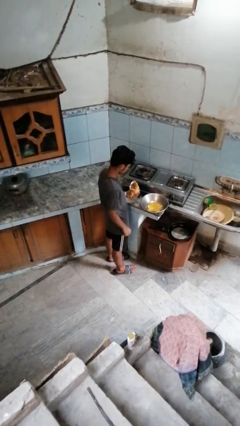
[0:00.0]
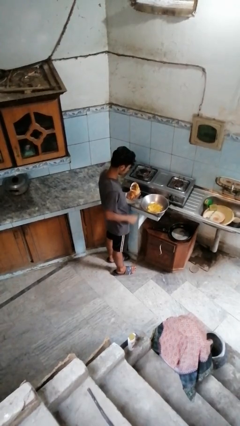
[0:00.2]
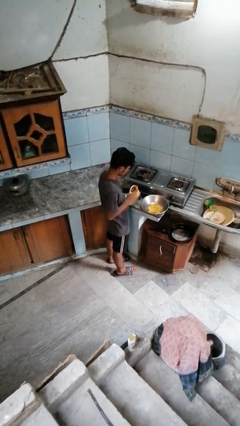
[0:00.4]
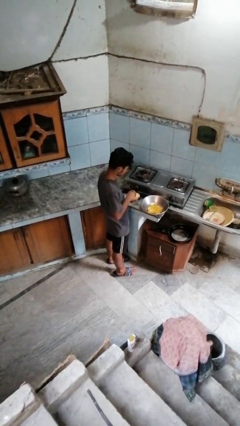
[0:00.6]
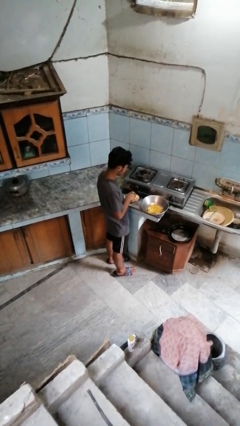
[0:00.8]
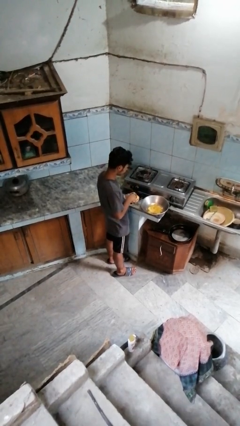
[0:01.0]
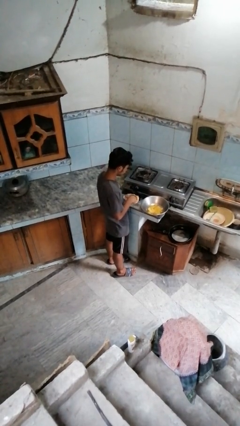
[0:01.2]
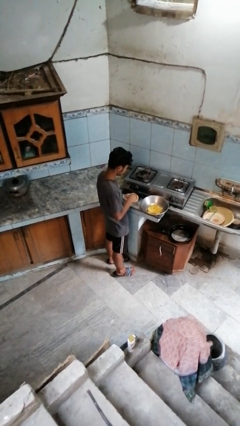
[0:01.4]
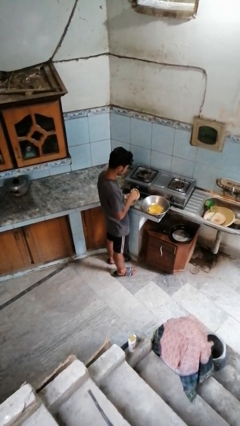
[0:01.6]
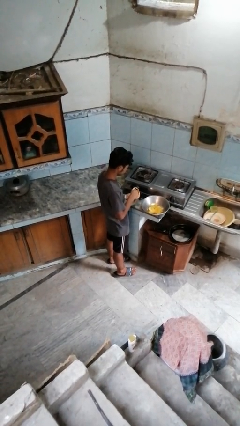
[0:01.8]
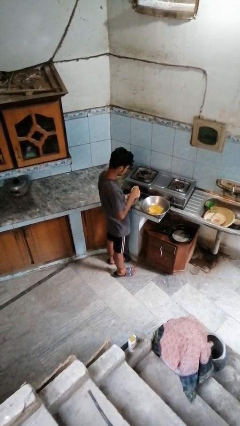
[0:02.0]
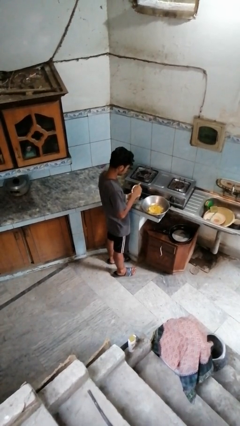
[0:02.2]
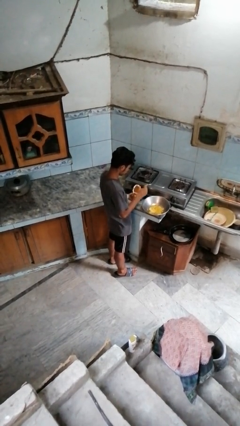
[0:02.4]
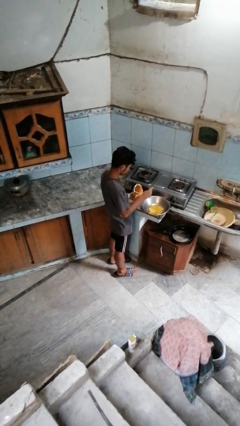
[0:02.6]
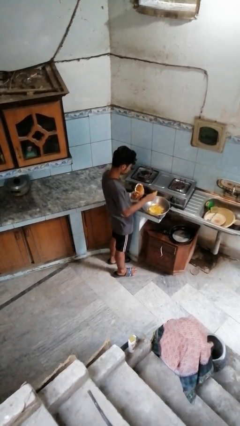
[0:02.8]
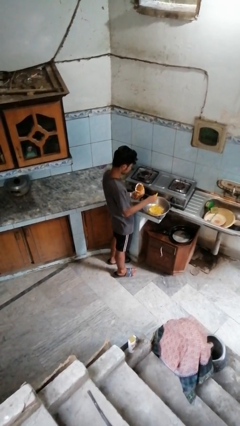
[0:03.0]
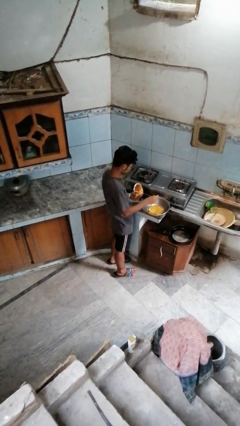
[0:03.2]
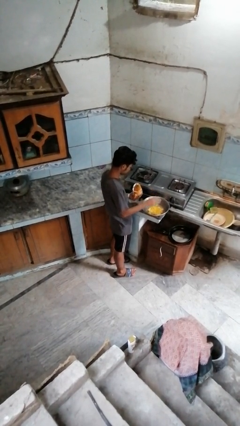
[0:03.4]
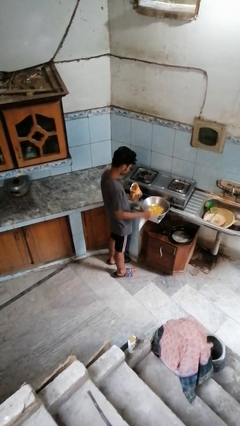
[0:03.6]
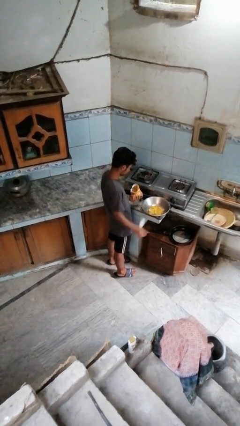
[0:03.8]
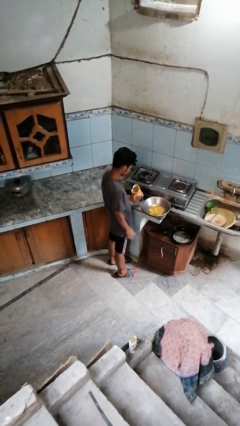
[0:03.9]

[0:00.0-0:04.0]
person pours into bowl

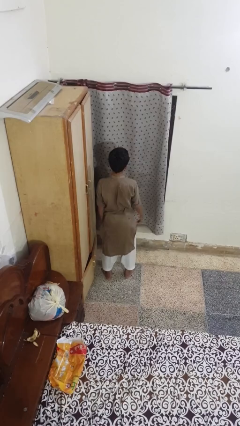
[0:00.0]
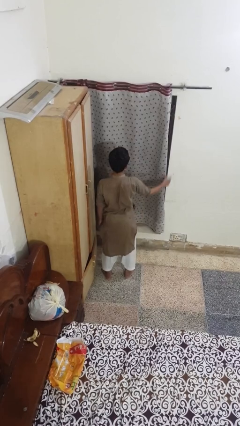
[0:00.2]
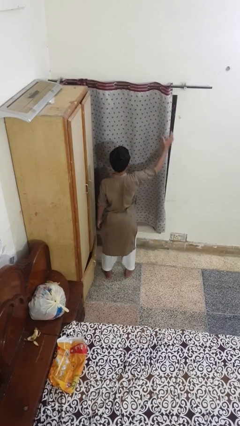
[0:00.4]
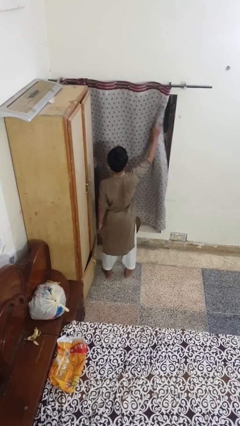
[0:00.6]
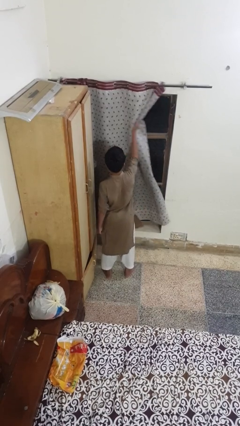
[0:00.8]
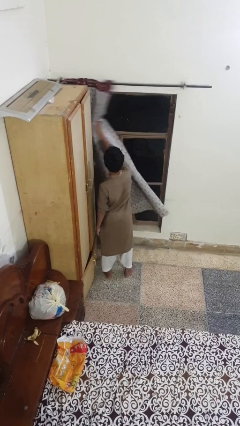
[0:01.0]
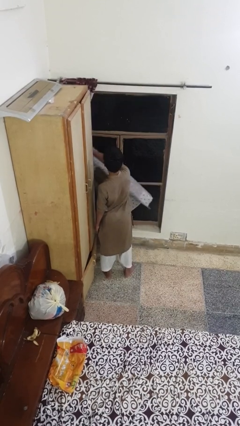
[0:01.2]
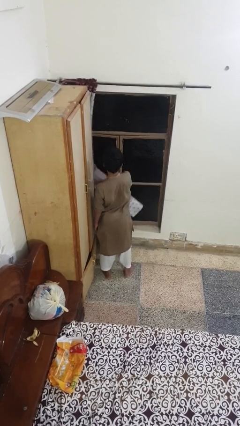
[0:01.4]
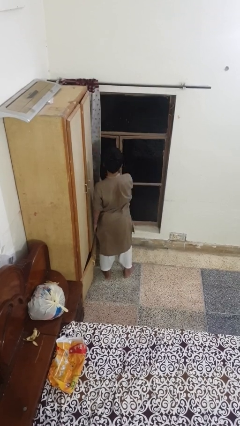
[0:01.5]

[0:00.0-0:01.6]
person opens curtains

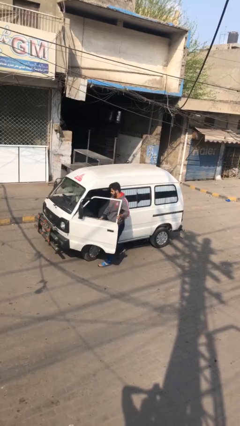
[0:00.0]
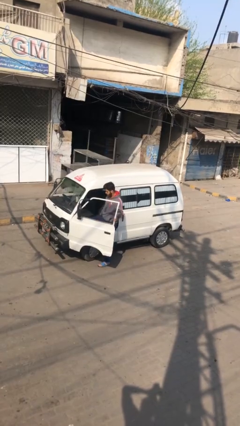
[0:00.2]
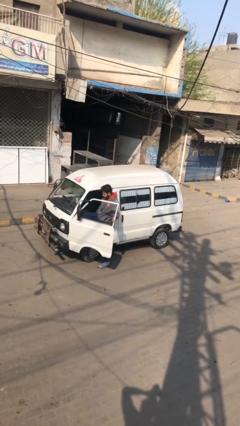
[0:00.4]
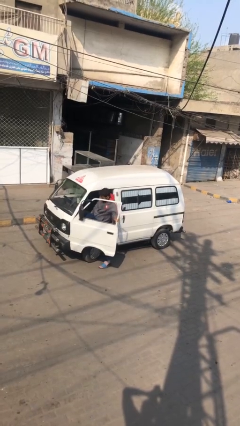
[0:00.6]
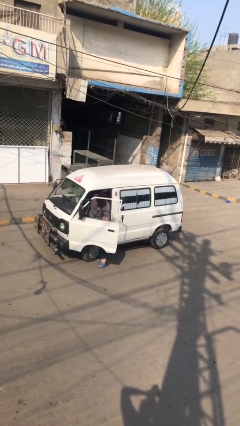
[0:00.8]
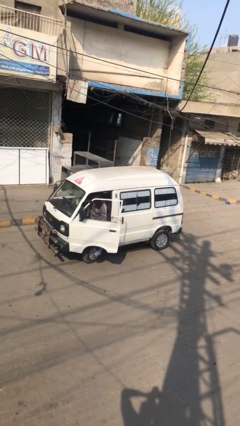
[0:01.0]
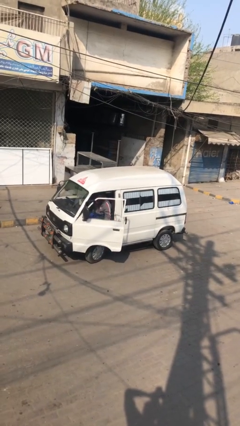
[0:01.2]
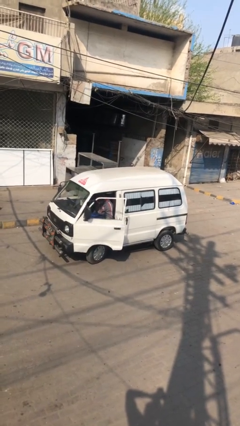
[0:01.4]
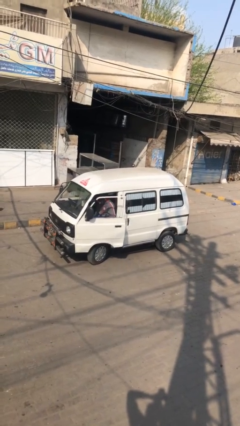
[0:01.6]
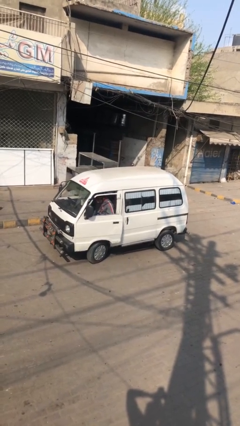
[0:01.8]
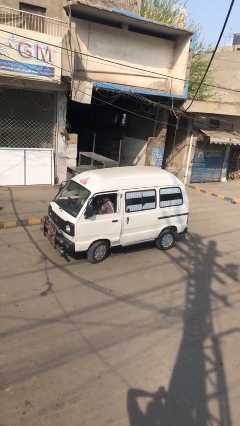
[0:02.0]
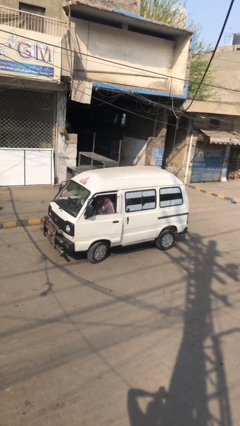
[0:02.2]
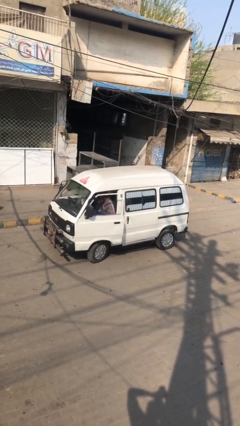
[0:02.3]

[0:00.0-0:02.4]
car picks up person

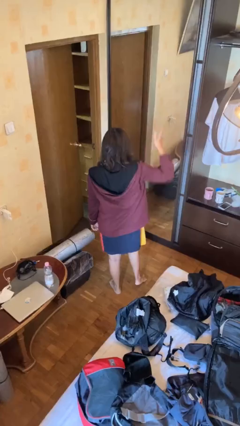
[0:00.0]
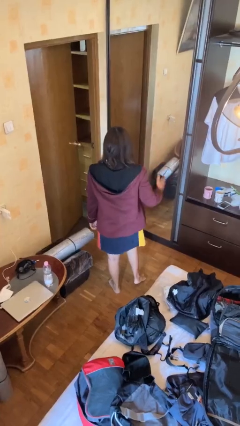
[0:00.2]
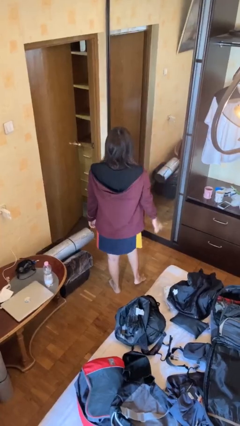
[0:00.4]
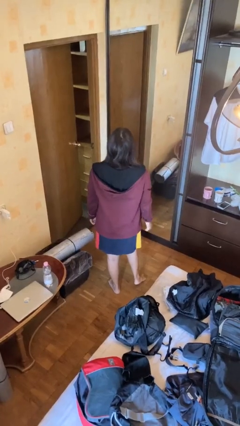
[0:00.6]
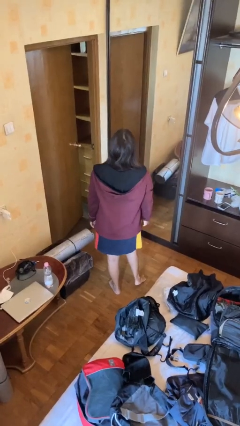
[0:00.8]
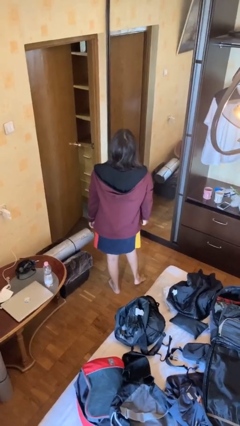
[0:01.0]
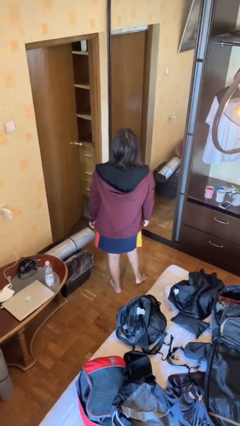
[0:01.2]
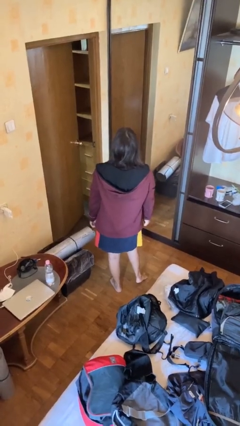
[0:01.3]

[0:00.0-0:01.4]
person gestures swipe down

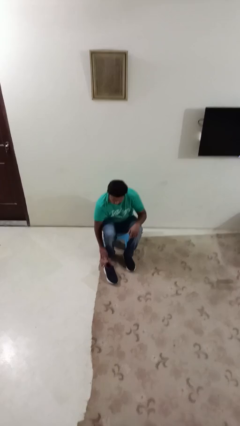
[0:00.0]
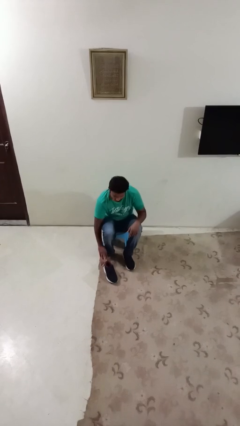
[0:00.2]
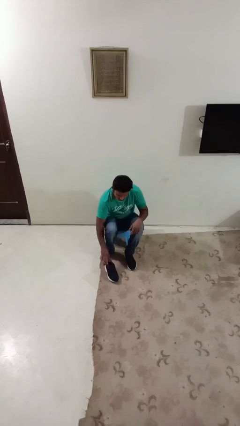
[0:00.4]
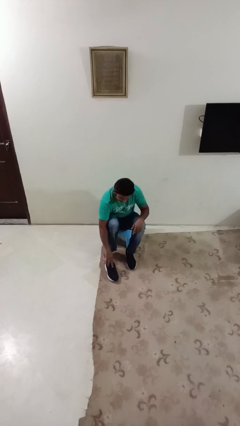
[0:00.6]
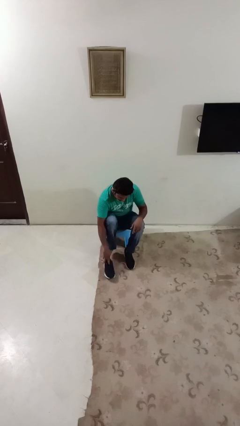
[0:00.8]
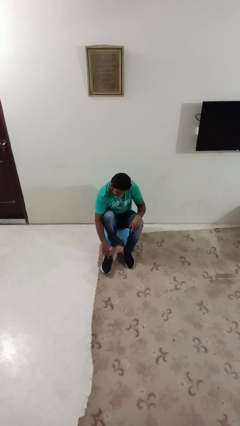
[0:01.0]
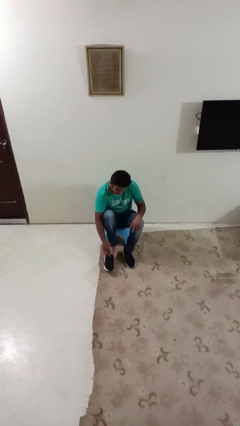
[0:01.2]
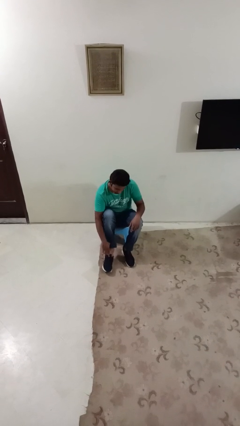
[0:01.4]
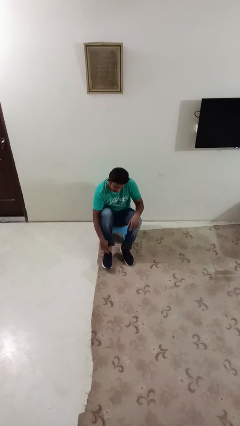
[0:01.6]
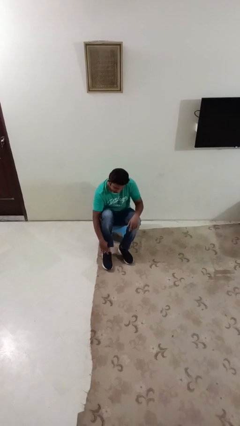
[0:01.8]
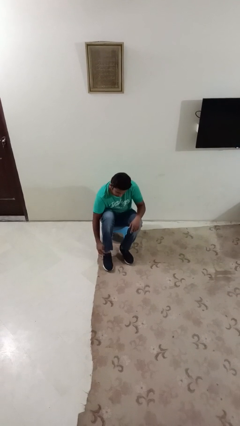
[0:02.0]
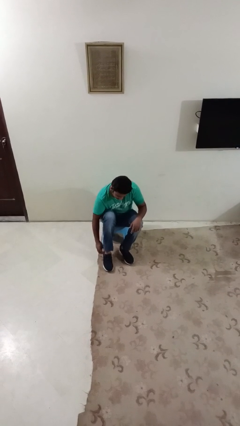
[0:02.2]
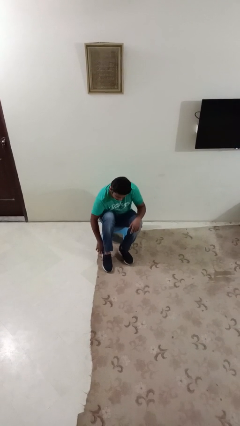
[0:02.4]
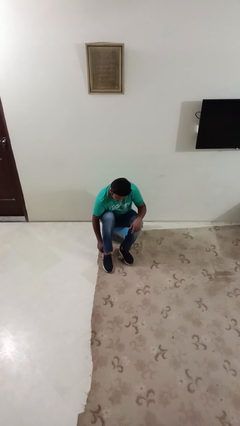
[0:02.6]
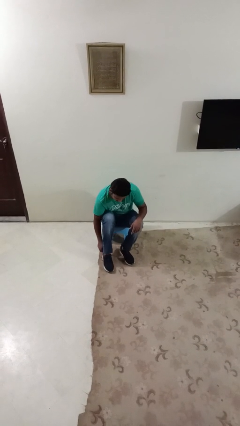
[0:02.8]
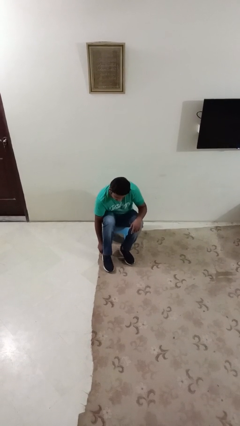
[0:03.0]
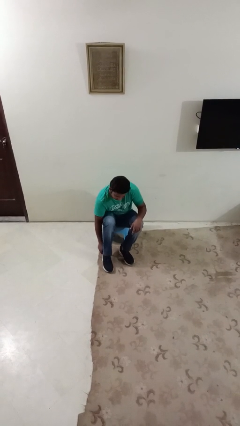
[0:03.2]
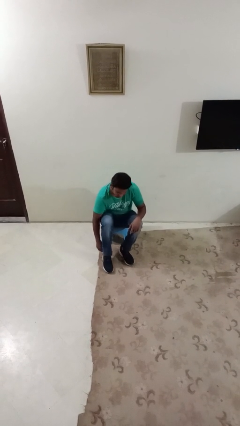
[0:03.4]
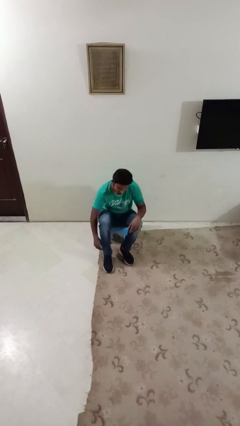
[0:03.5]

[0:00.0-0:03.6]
person puts on shoes

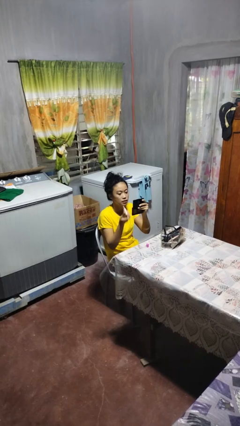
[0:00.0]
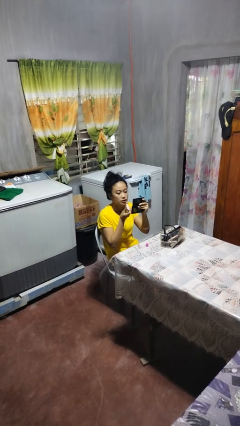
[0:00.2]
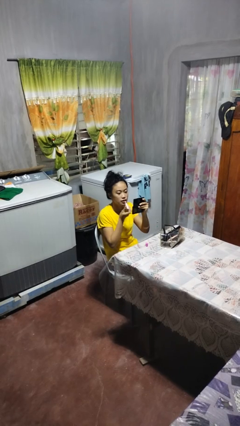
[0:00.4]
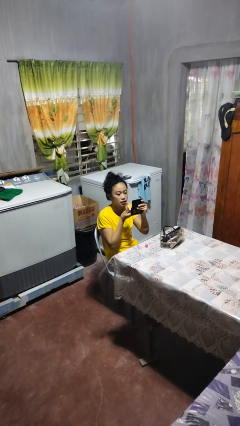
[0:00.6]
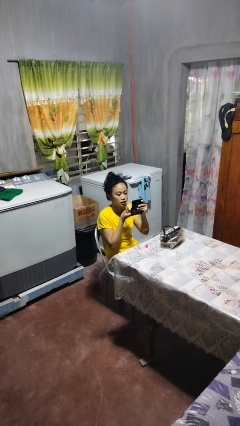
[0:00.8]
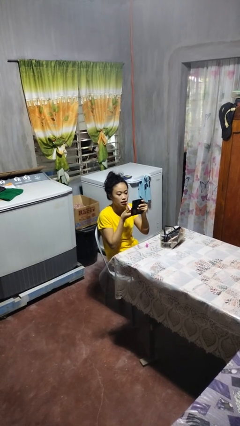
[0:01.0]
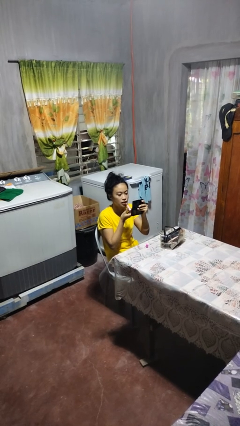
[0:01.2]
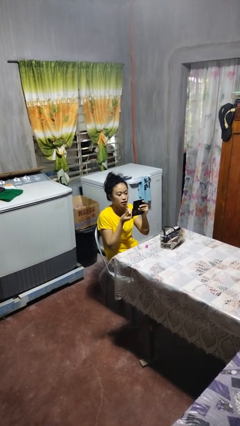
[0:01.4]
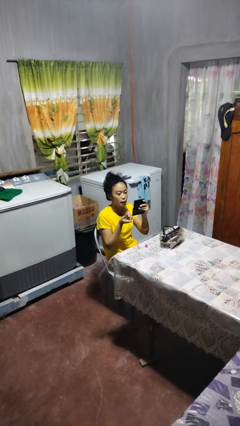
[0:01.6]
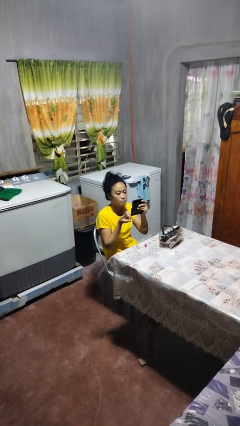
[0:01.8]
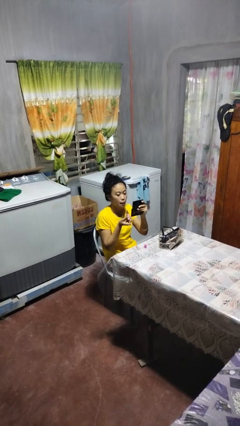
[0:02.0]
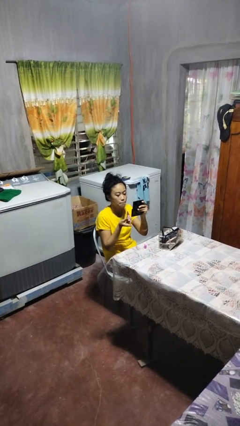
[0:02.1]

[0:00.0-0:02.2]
person applies lip makeup

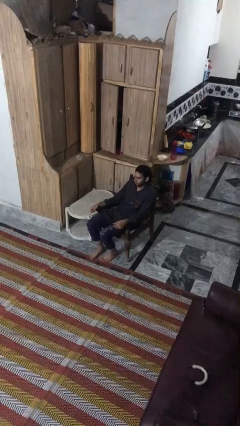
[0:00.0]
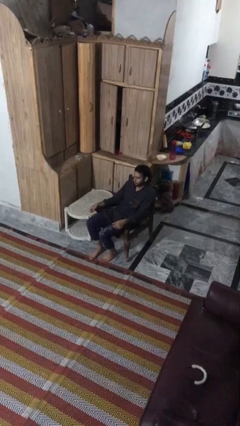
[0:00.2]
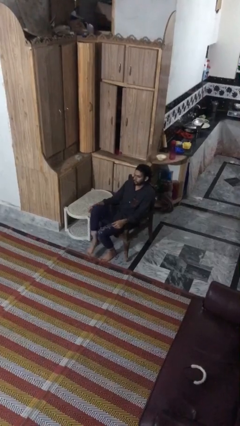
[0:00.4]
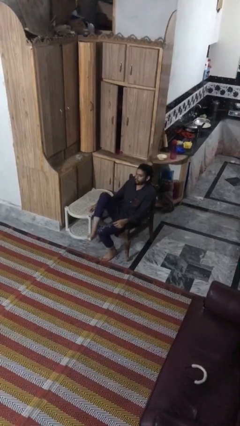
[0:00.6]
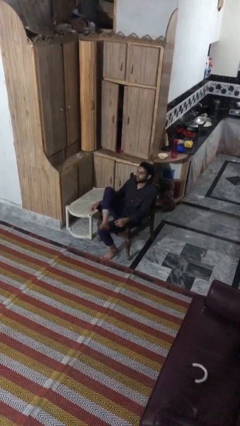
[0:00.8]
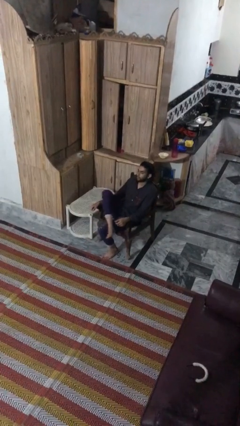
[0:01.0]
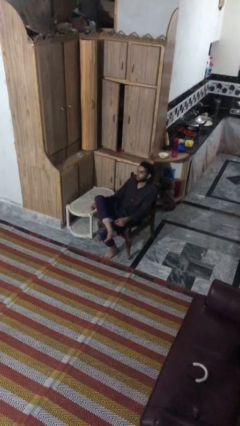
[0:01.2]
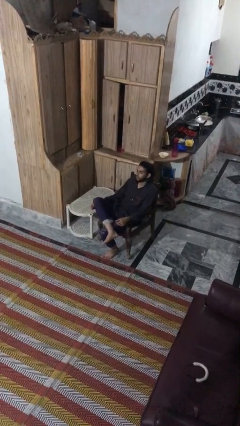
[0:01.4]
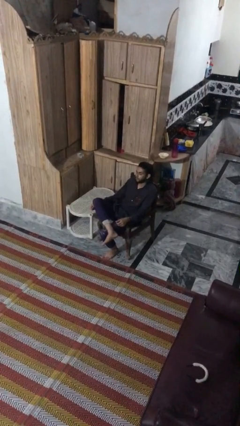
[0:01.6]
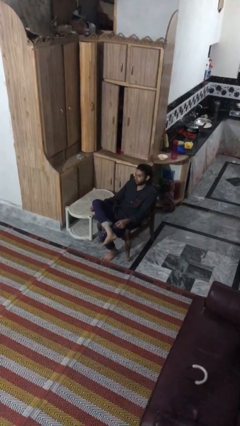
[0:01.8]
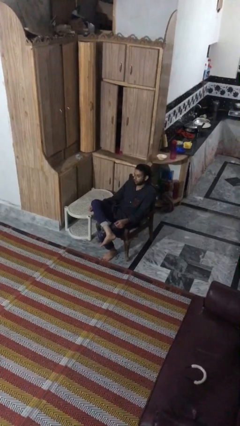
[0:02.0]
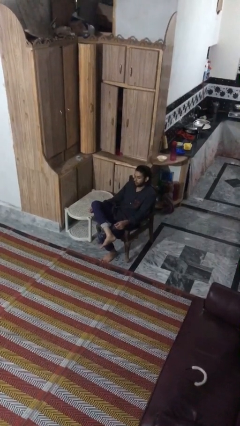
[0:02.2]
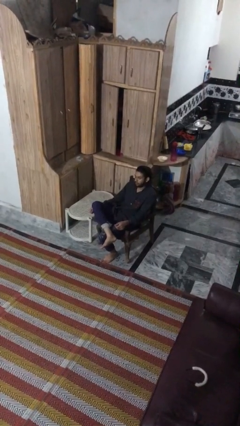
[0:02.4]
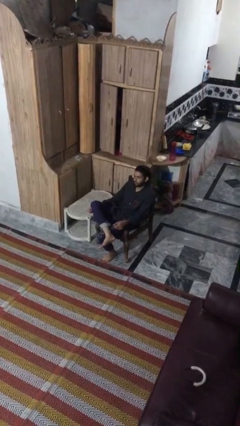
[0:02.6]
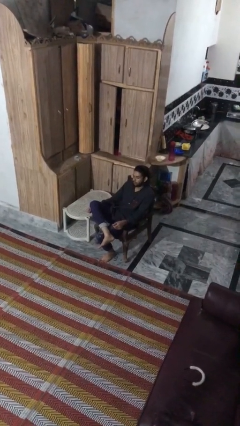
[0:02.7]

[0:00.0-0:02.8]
person crosses legs
